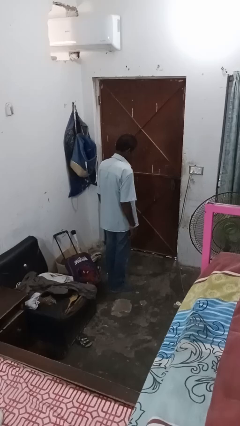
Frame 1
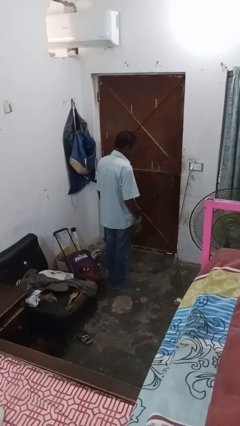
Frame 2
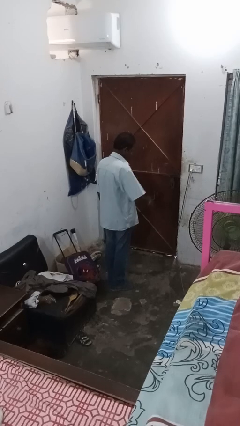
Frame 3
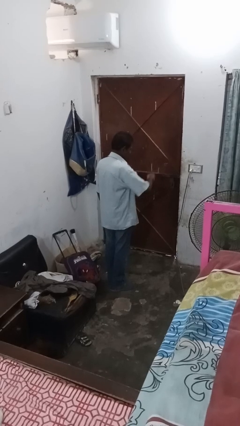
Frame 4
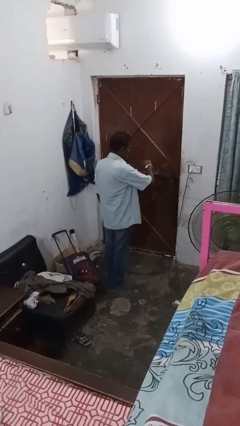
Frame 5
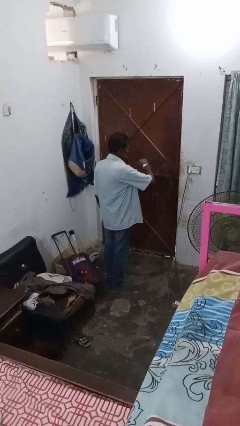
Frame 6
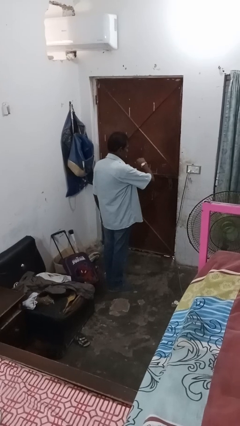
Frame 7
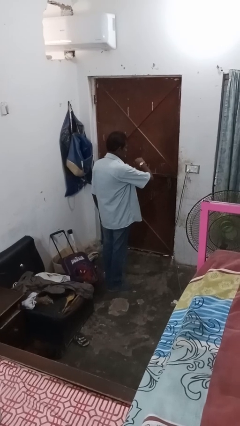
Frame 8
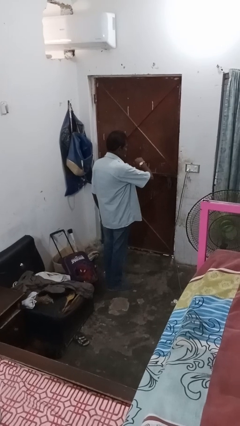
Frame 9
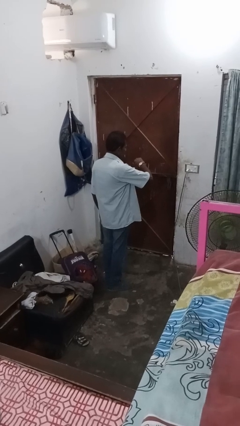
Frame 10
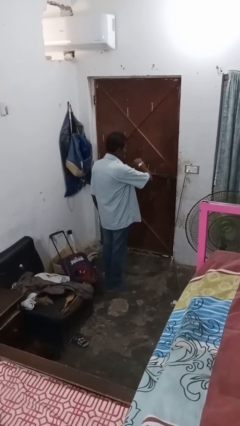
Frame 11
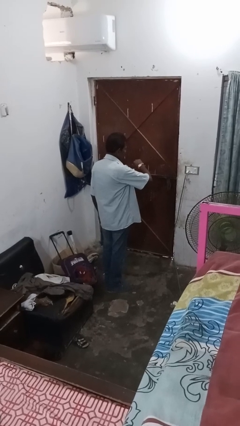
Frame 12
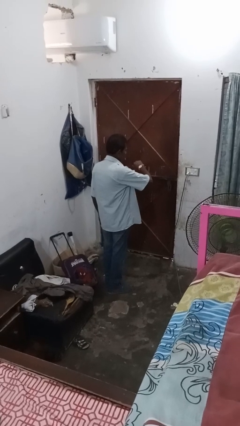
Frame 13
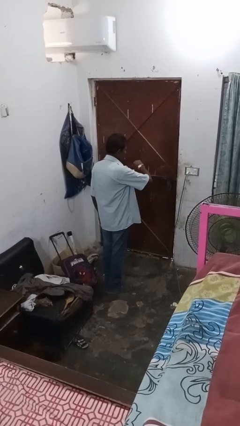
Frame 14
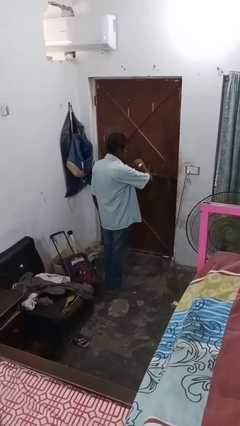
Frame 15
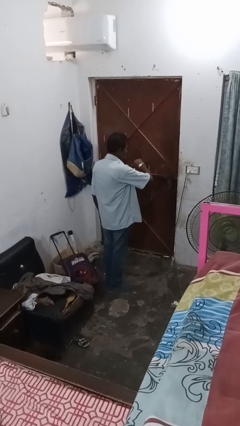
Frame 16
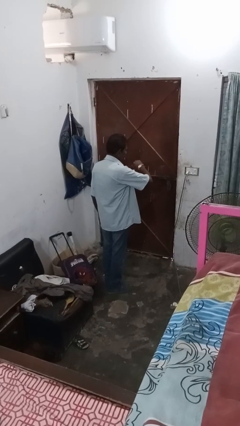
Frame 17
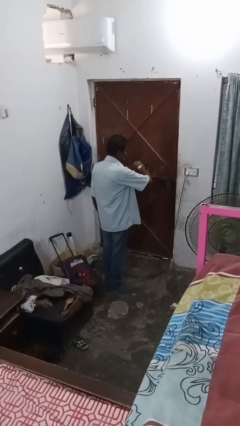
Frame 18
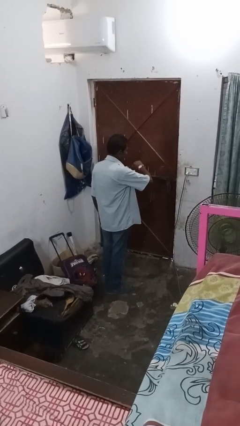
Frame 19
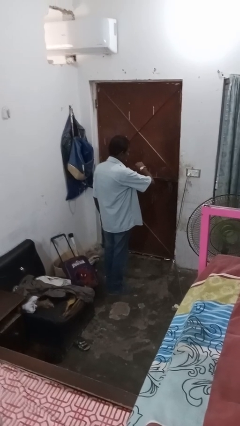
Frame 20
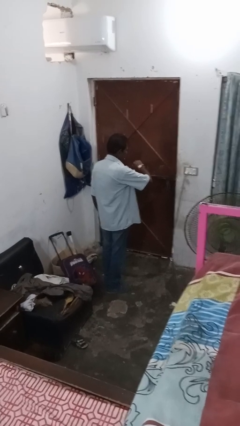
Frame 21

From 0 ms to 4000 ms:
person puts on wristwatch

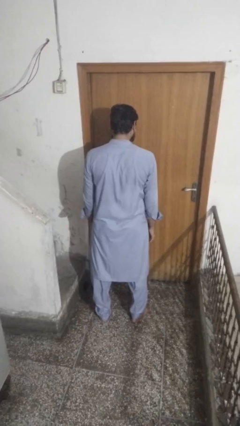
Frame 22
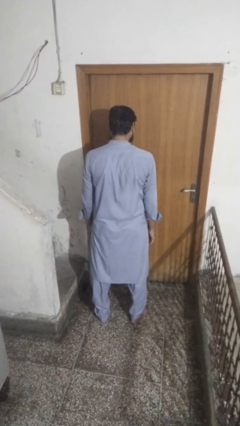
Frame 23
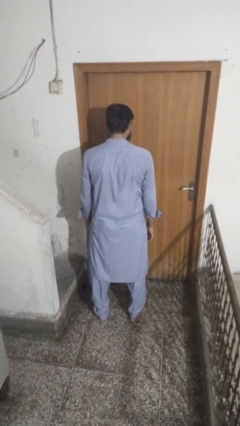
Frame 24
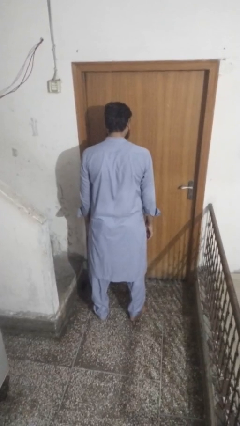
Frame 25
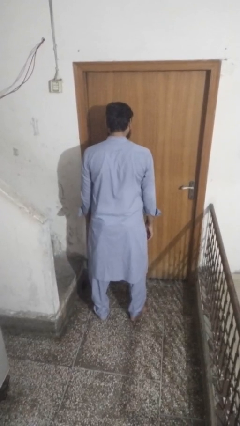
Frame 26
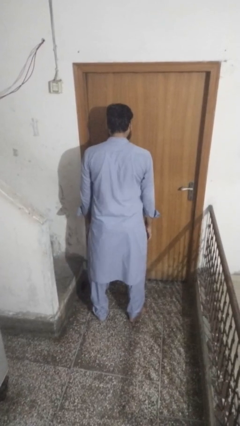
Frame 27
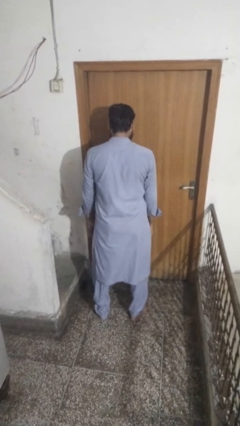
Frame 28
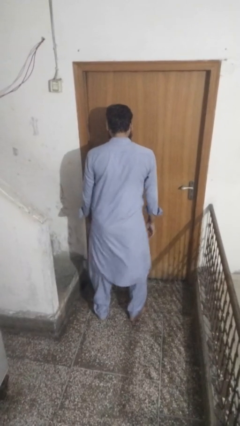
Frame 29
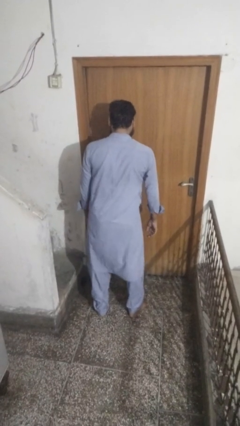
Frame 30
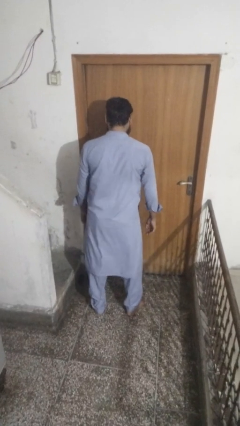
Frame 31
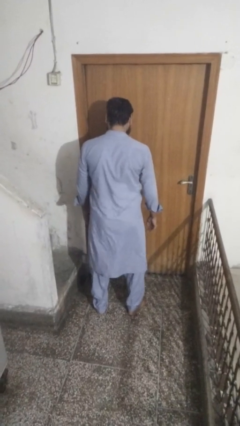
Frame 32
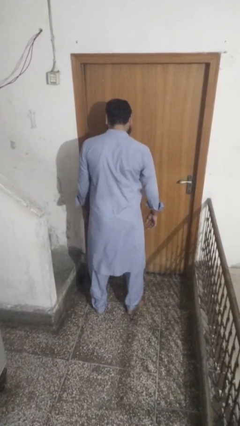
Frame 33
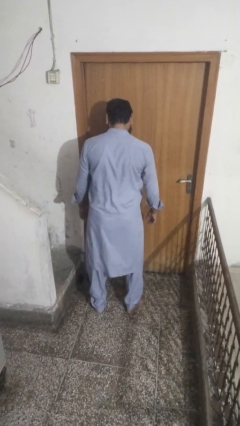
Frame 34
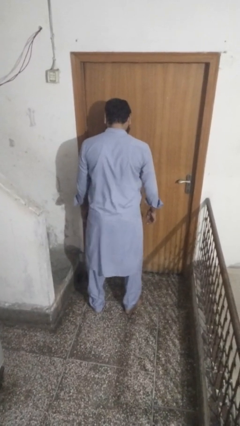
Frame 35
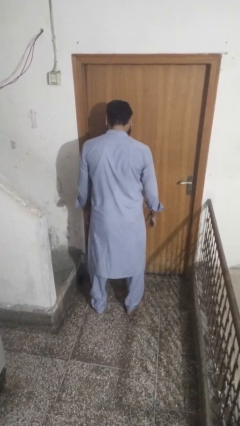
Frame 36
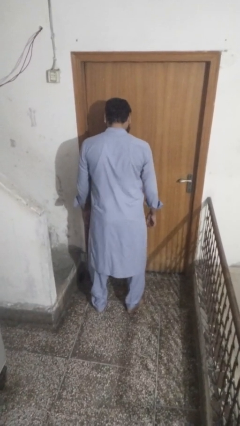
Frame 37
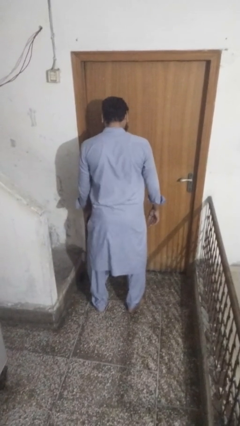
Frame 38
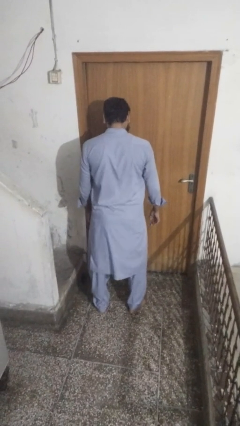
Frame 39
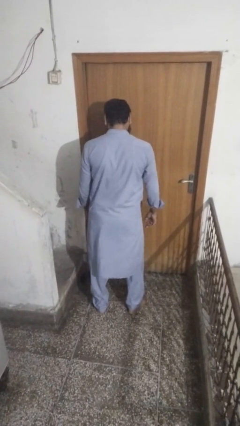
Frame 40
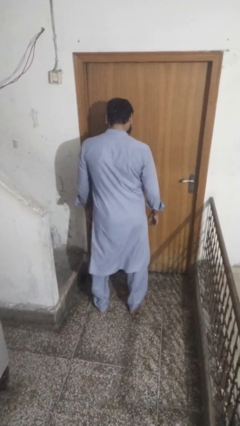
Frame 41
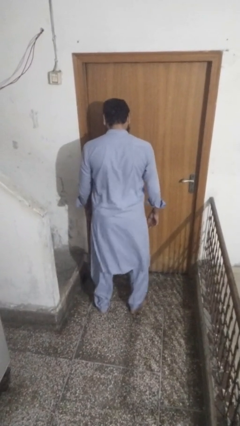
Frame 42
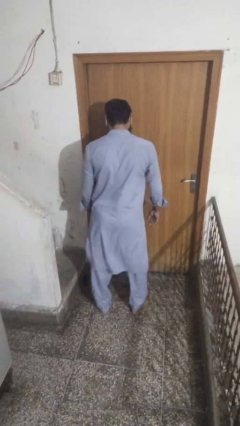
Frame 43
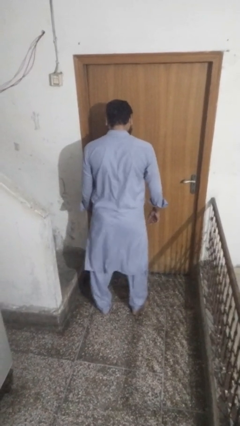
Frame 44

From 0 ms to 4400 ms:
person wiggles hips

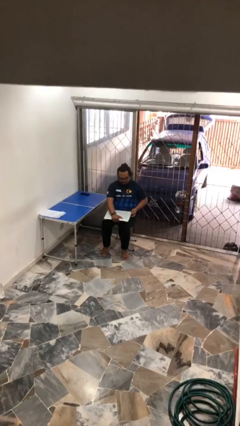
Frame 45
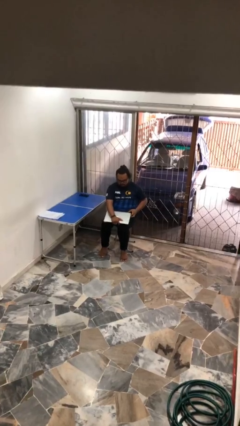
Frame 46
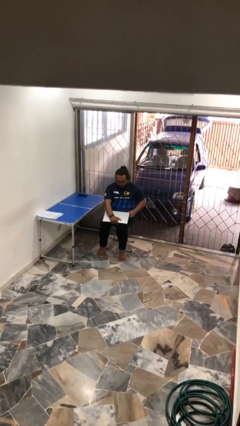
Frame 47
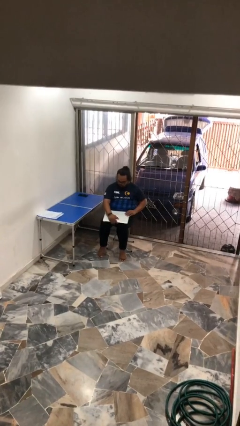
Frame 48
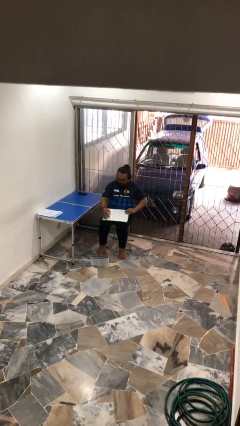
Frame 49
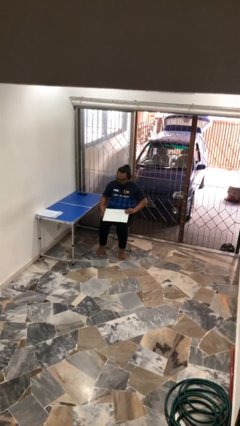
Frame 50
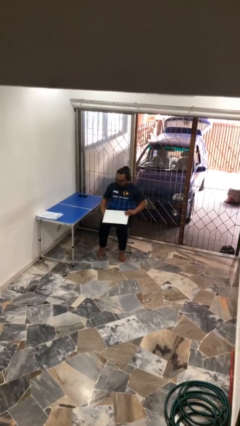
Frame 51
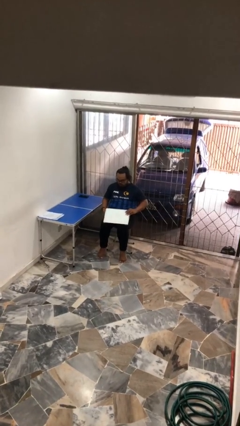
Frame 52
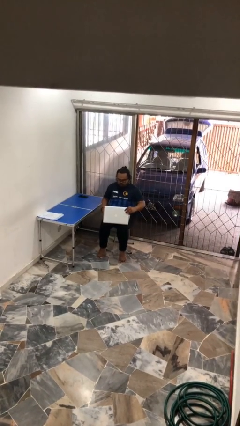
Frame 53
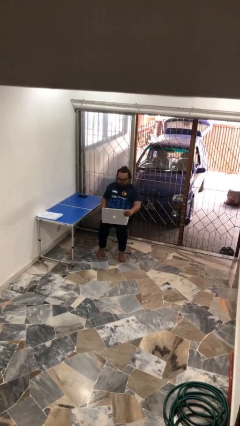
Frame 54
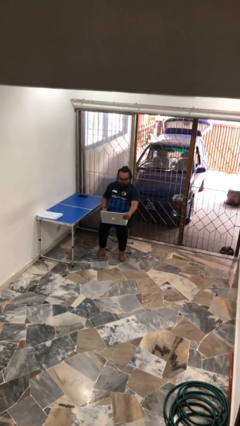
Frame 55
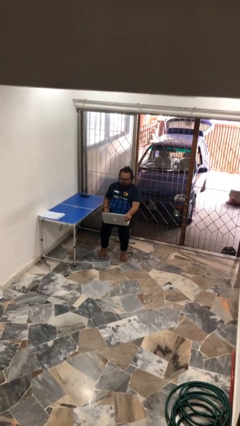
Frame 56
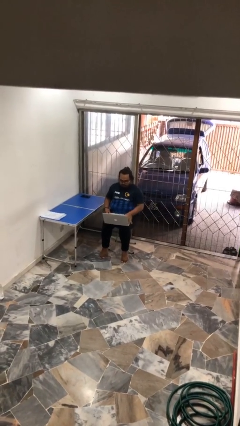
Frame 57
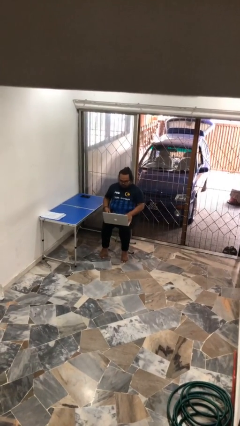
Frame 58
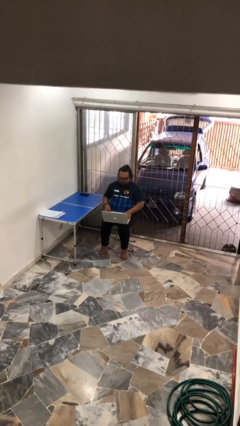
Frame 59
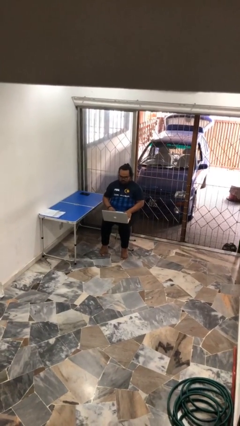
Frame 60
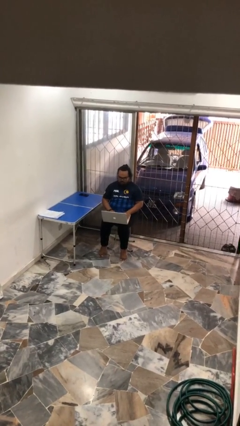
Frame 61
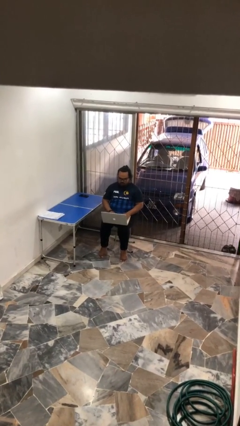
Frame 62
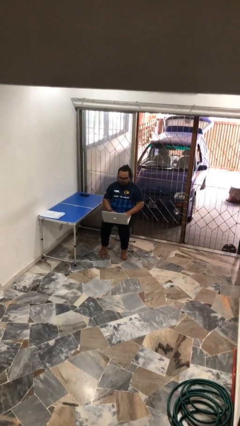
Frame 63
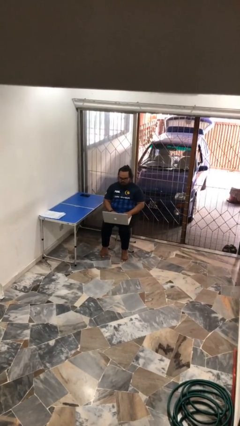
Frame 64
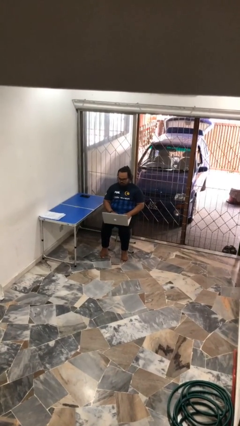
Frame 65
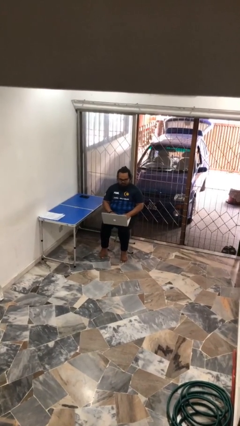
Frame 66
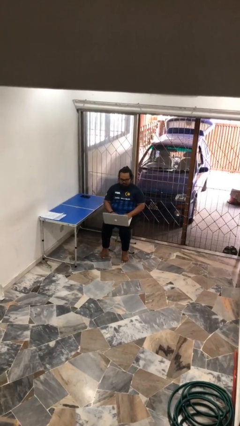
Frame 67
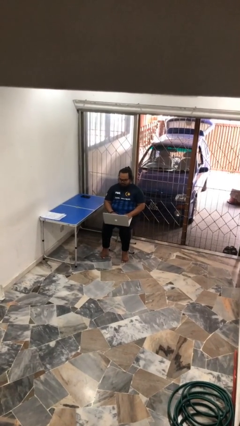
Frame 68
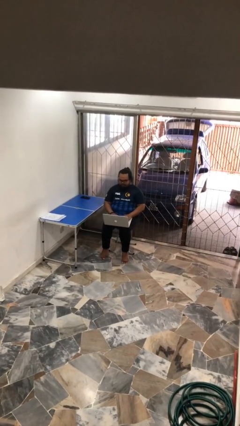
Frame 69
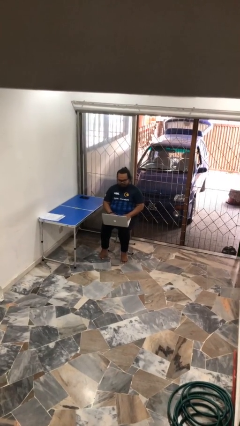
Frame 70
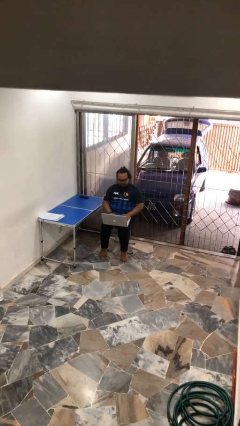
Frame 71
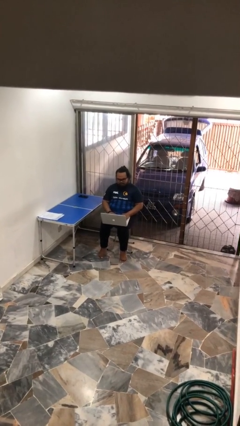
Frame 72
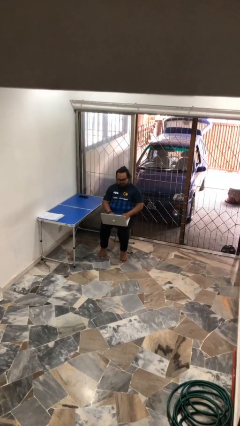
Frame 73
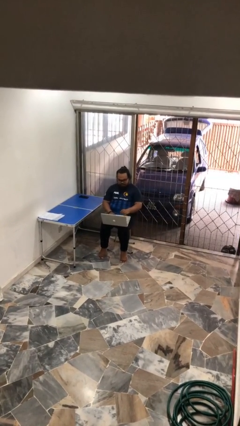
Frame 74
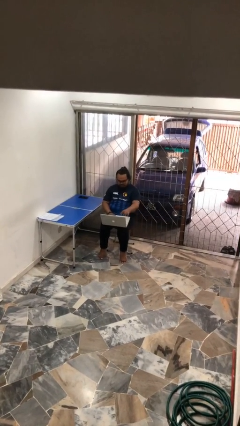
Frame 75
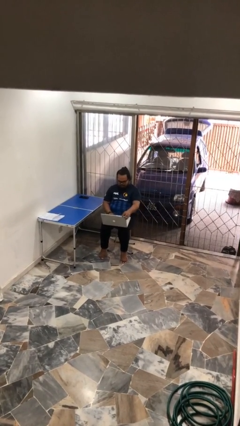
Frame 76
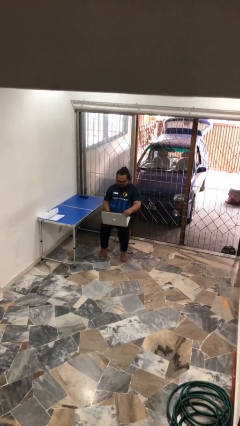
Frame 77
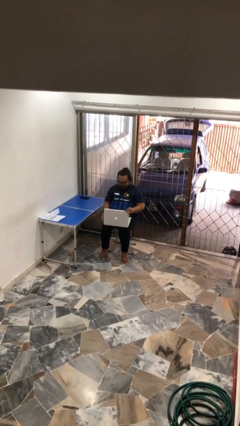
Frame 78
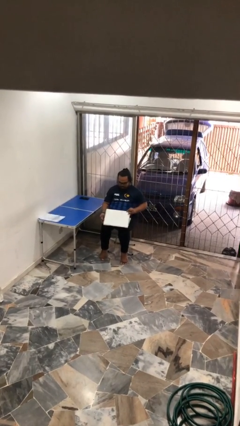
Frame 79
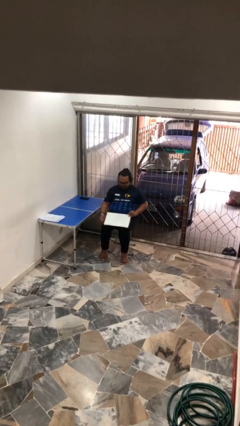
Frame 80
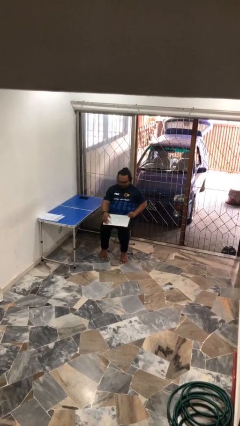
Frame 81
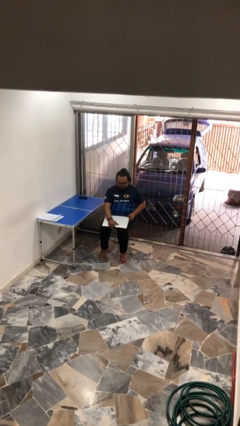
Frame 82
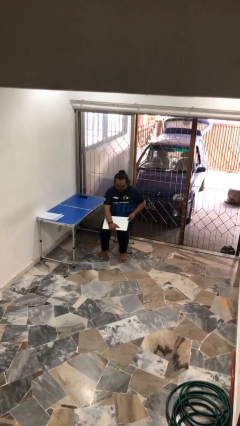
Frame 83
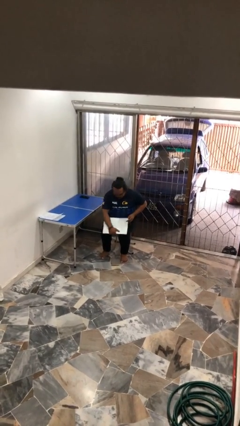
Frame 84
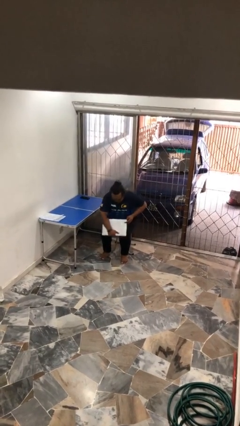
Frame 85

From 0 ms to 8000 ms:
person interacts with laptop

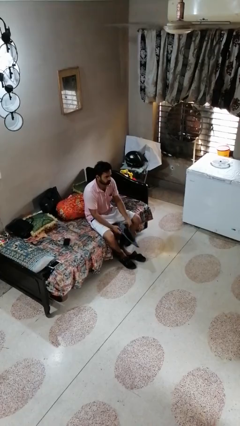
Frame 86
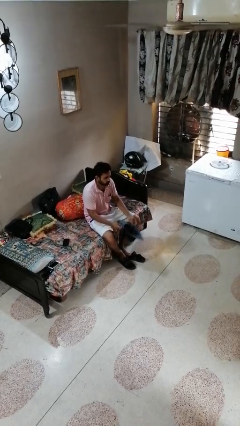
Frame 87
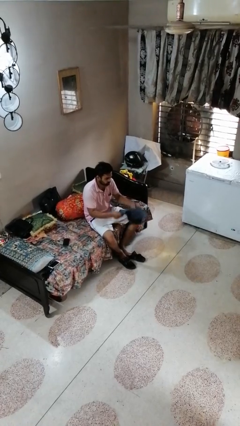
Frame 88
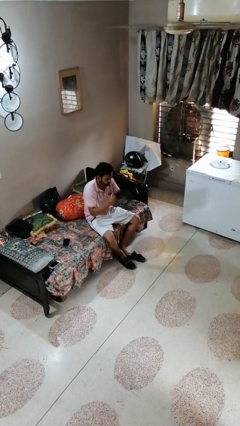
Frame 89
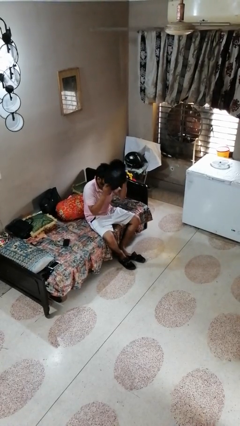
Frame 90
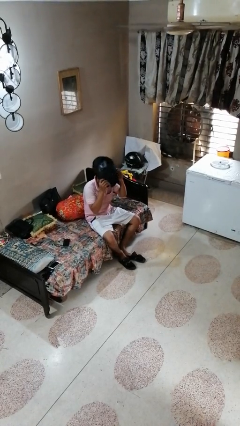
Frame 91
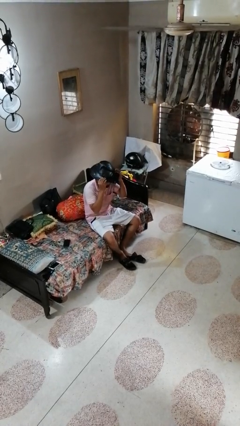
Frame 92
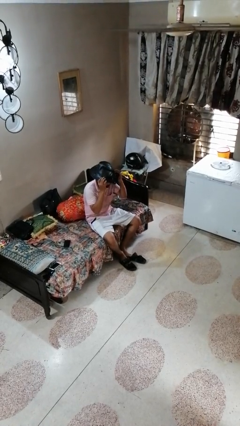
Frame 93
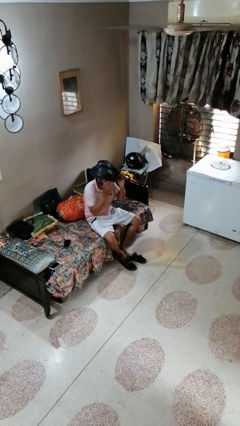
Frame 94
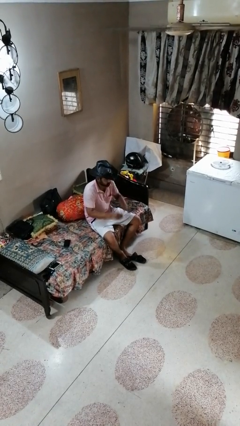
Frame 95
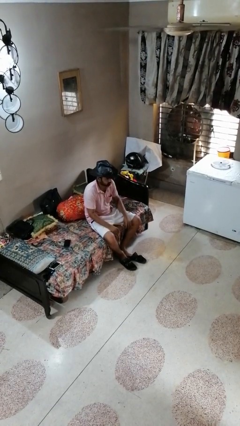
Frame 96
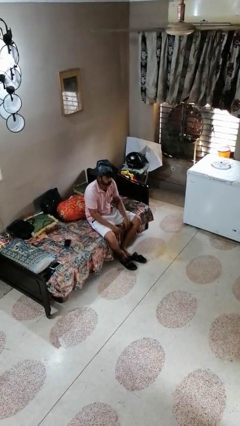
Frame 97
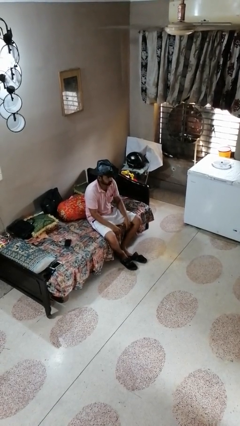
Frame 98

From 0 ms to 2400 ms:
person puts on hat
